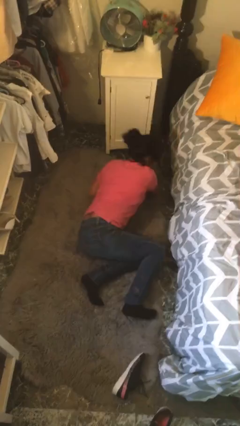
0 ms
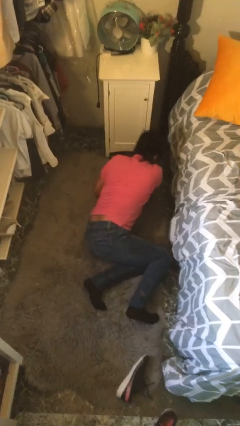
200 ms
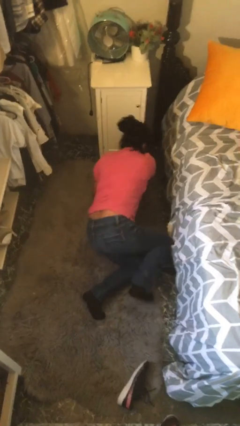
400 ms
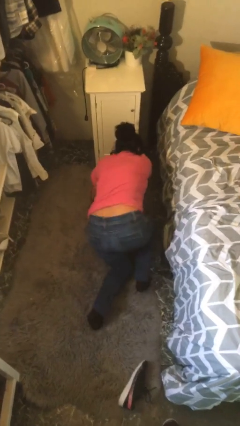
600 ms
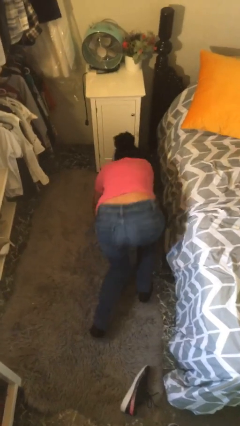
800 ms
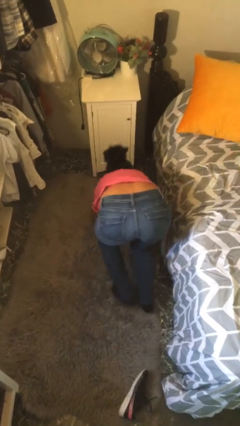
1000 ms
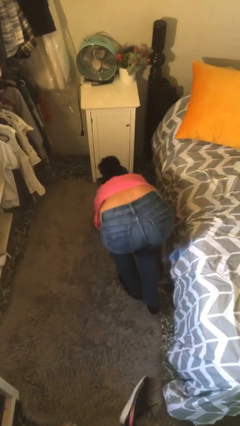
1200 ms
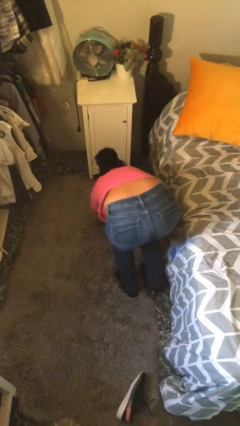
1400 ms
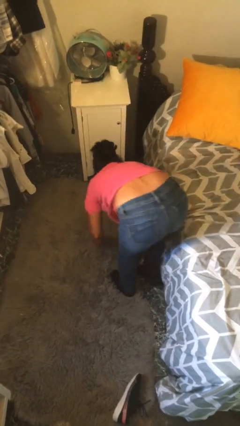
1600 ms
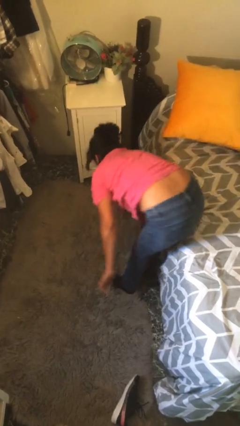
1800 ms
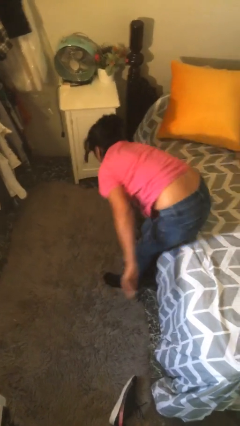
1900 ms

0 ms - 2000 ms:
person stands up from floor

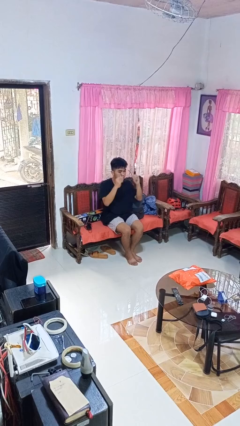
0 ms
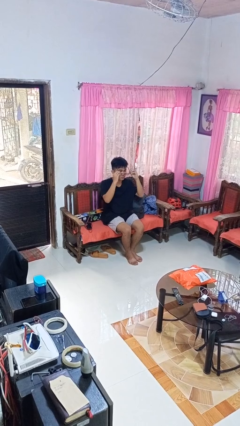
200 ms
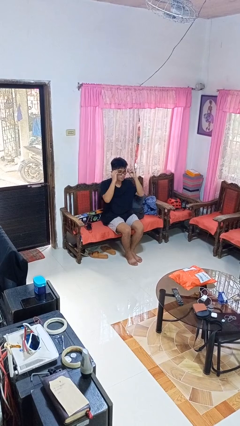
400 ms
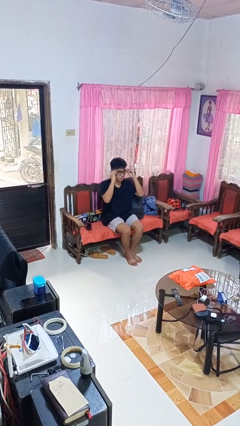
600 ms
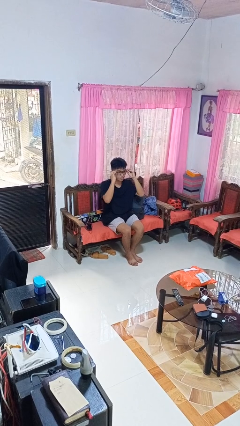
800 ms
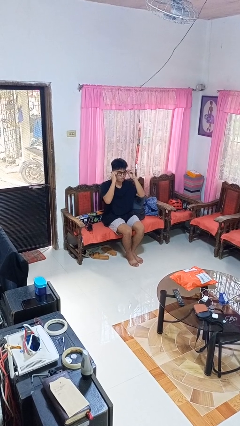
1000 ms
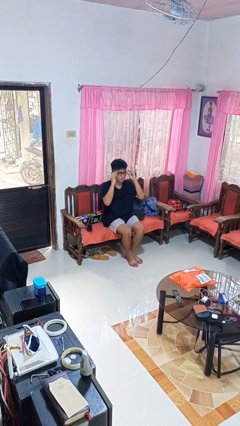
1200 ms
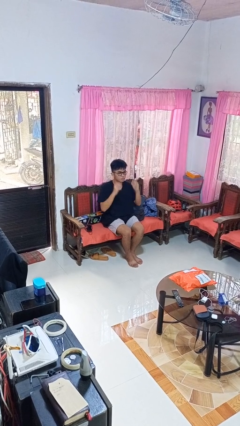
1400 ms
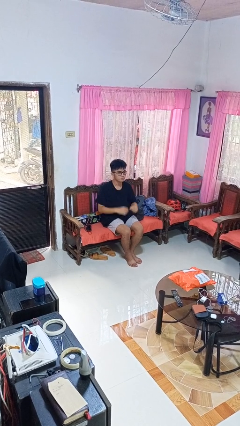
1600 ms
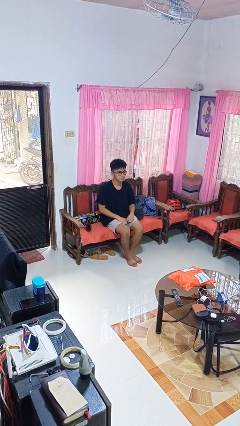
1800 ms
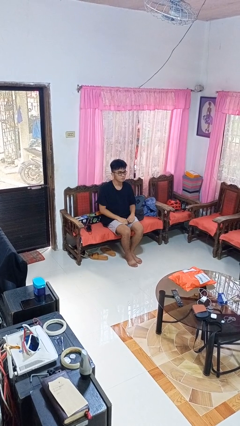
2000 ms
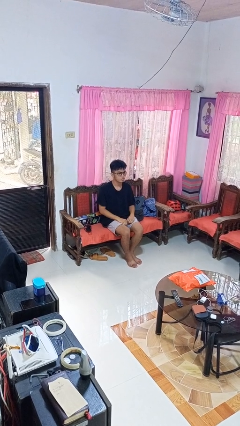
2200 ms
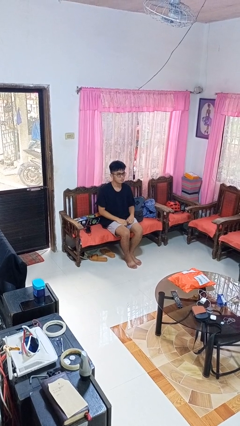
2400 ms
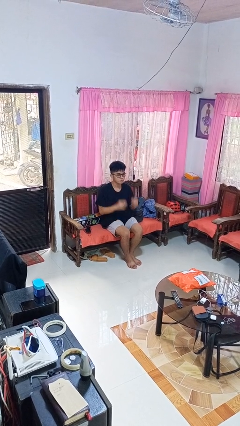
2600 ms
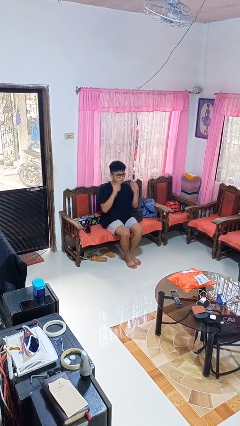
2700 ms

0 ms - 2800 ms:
person puts on glasses

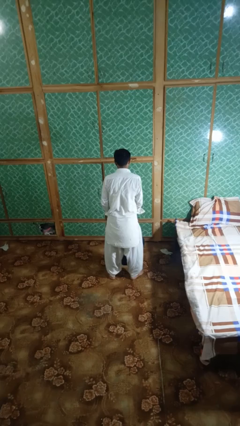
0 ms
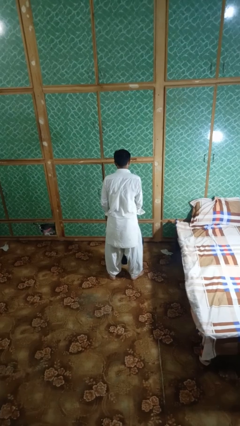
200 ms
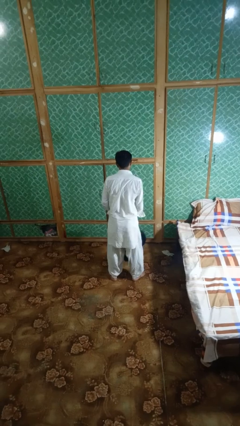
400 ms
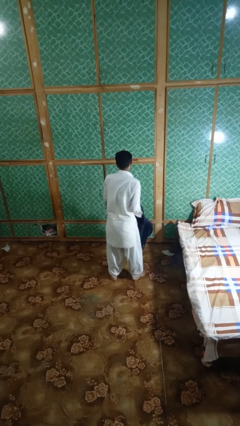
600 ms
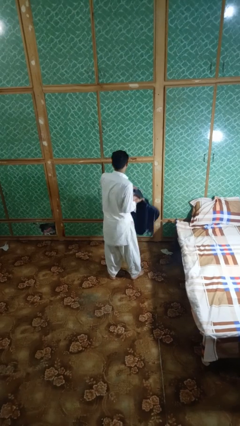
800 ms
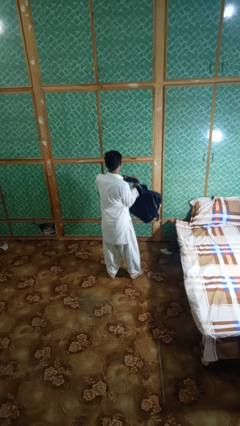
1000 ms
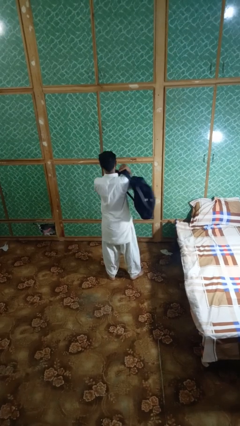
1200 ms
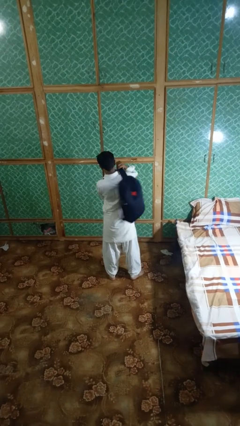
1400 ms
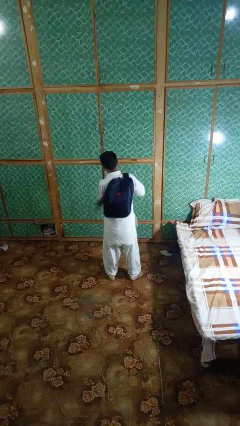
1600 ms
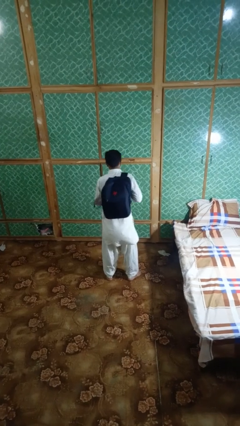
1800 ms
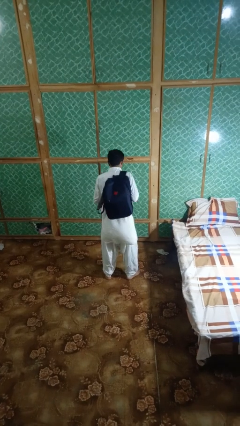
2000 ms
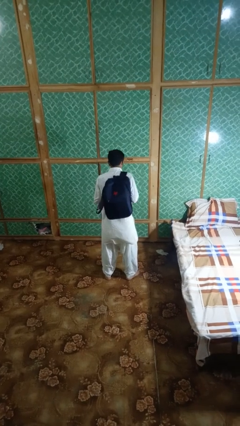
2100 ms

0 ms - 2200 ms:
person puts on backpack

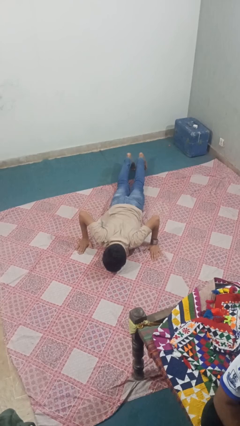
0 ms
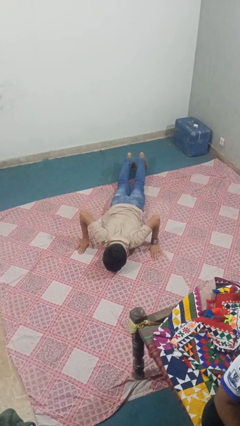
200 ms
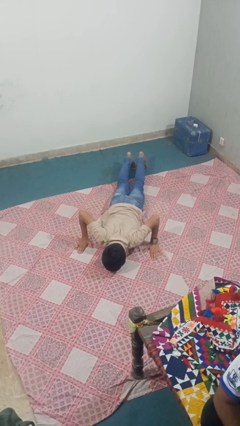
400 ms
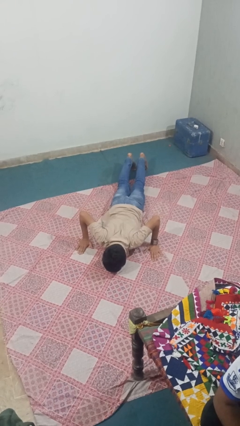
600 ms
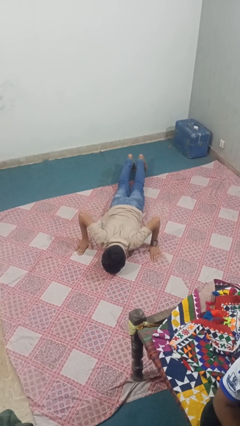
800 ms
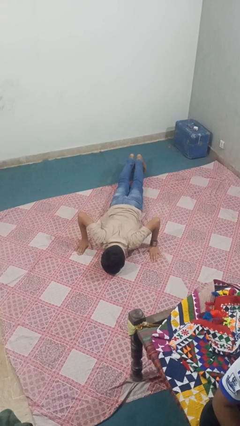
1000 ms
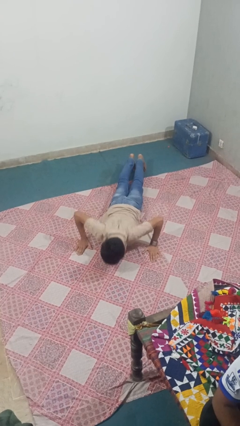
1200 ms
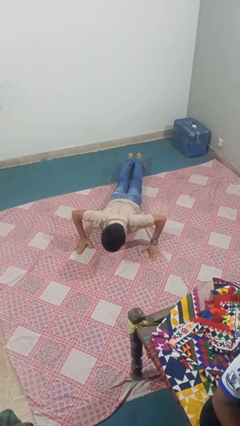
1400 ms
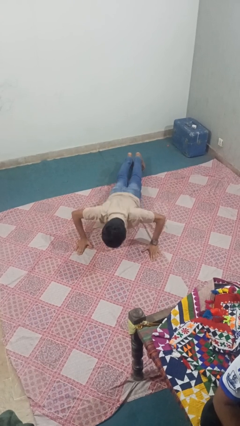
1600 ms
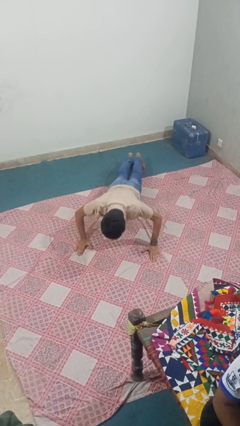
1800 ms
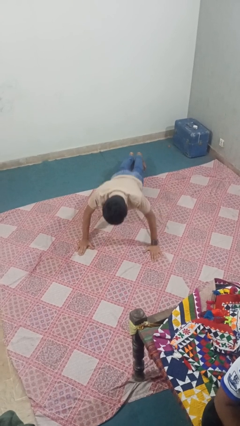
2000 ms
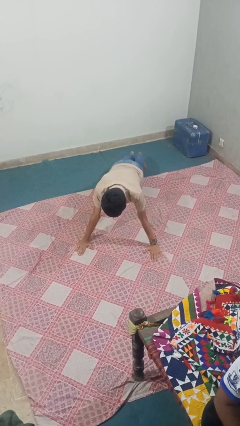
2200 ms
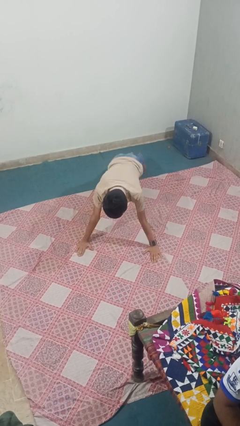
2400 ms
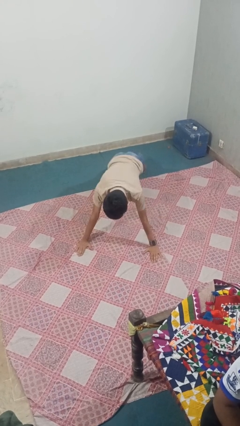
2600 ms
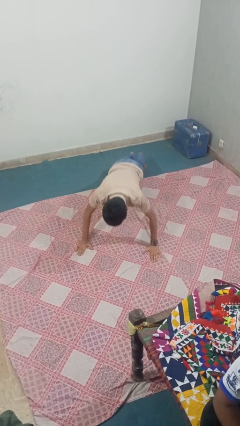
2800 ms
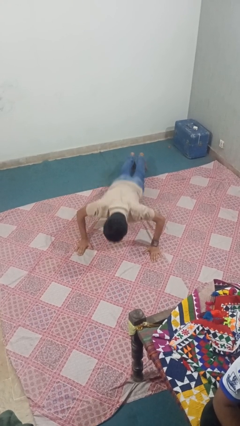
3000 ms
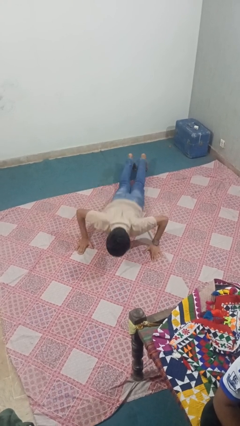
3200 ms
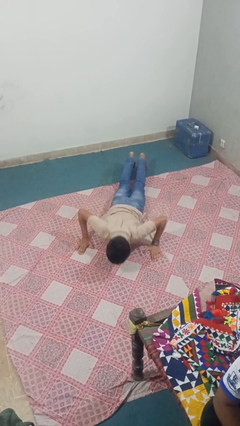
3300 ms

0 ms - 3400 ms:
person exercises with pushup

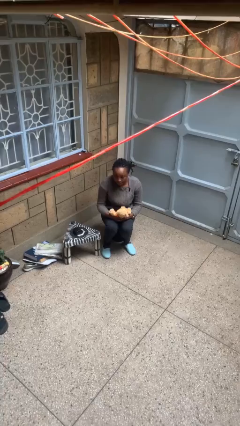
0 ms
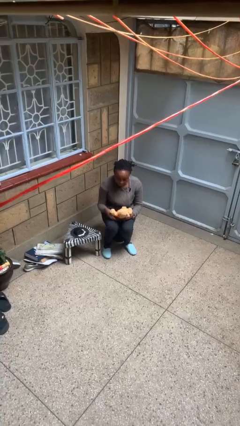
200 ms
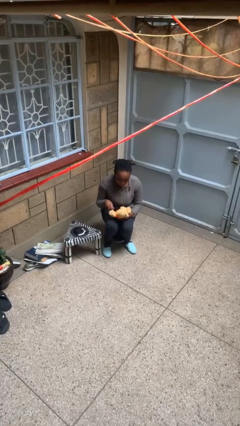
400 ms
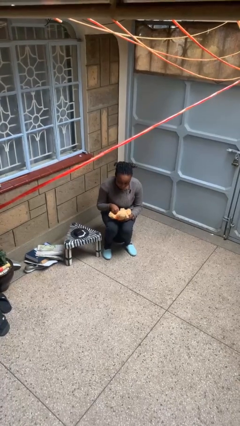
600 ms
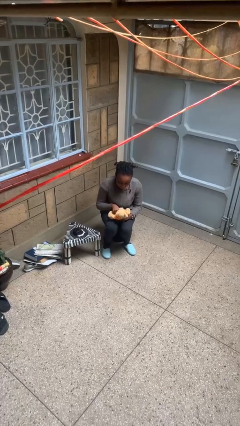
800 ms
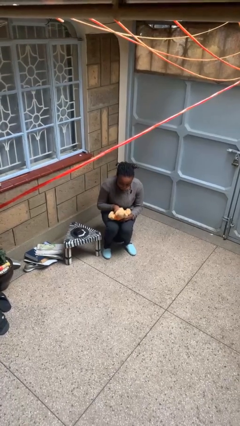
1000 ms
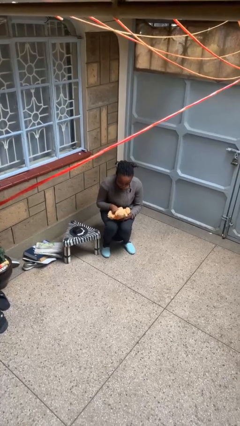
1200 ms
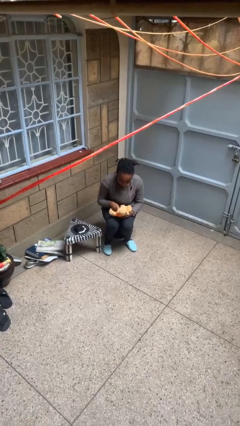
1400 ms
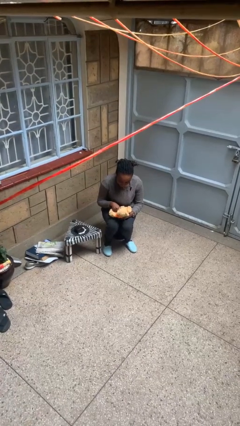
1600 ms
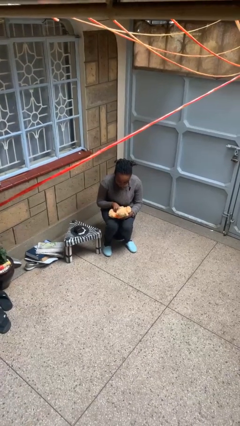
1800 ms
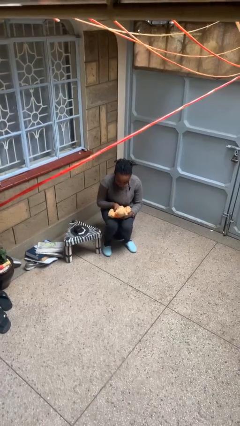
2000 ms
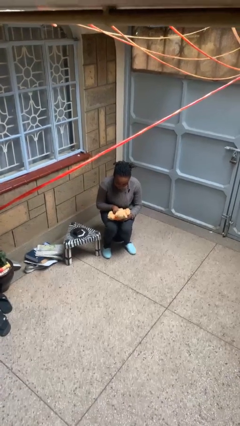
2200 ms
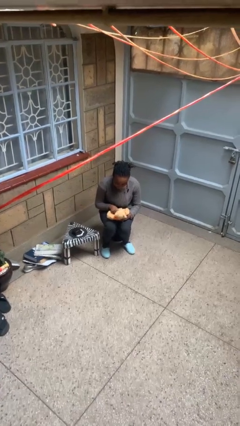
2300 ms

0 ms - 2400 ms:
person squeezes object

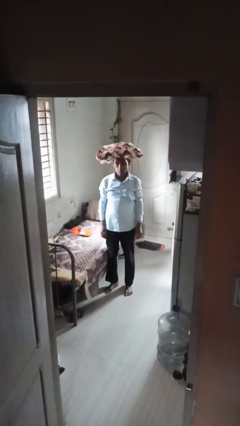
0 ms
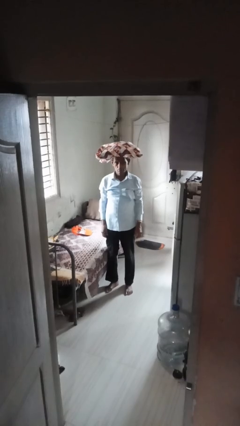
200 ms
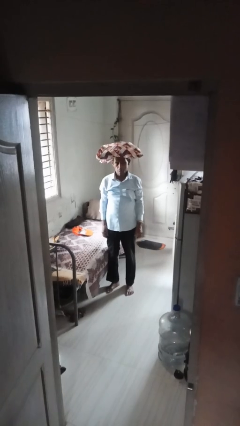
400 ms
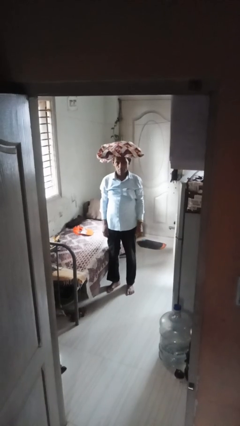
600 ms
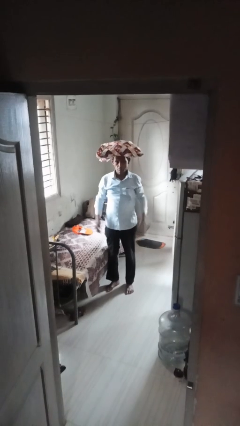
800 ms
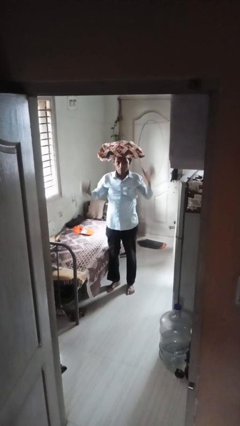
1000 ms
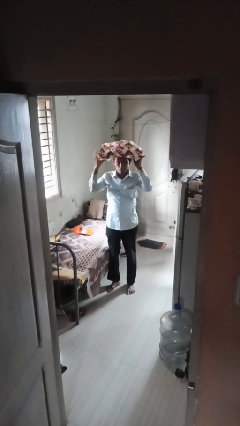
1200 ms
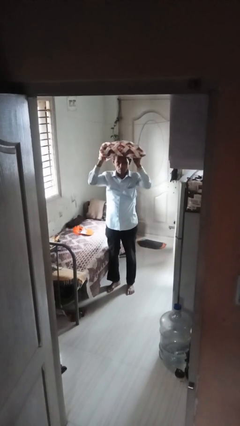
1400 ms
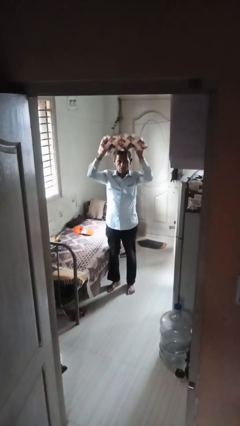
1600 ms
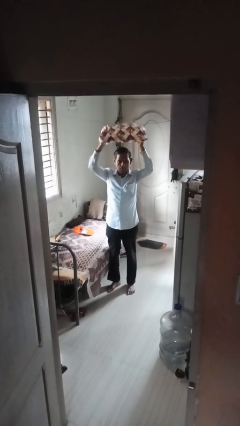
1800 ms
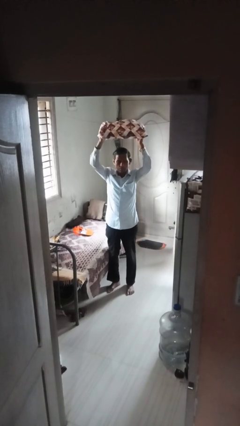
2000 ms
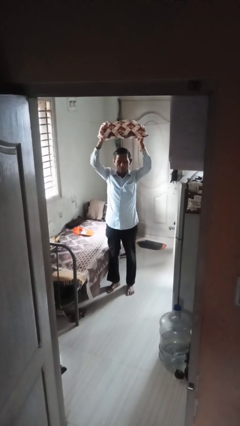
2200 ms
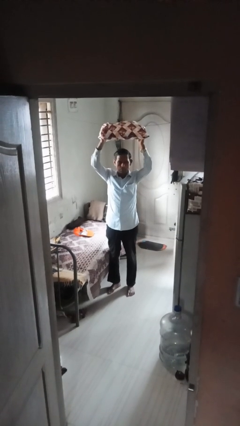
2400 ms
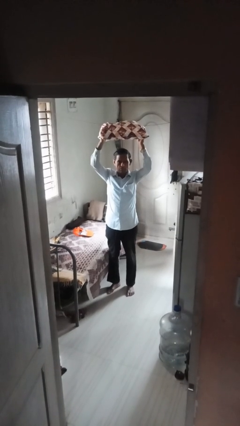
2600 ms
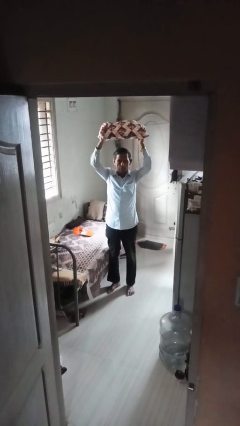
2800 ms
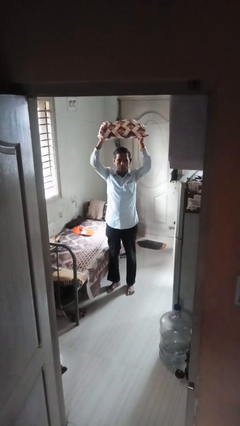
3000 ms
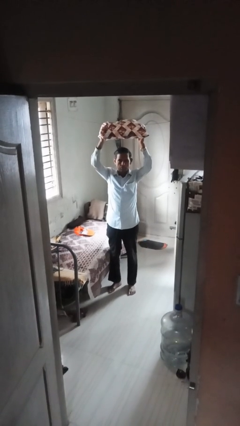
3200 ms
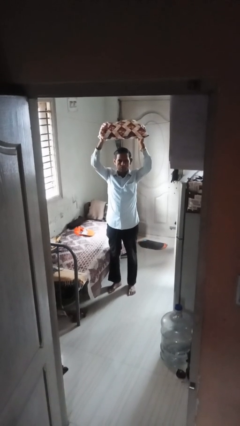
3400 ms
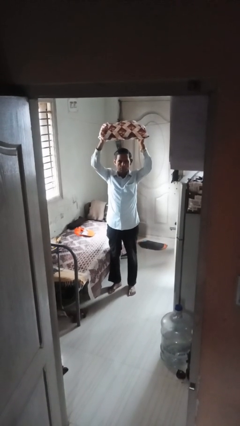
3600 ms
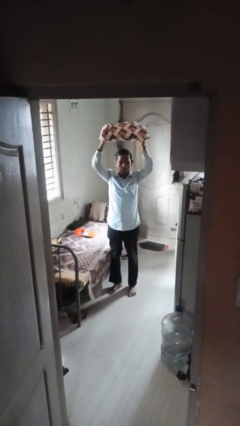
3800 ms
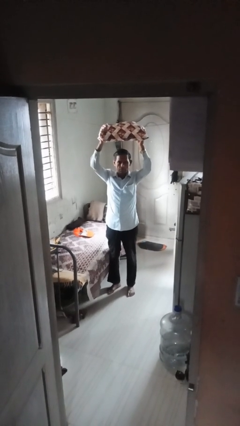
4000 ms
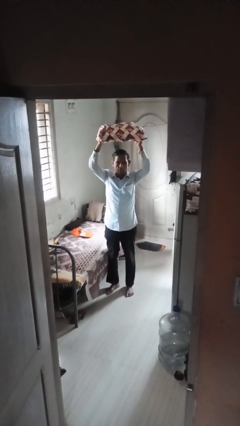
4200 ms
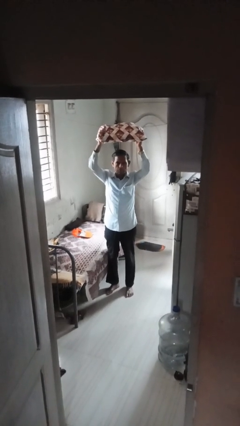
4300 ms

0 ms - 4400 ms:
person holds object above head

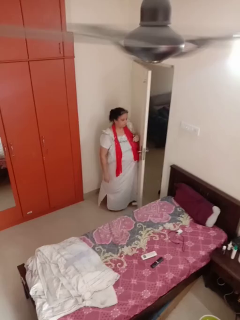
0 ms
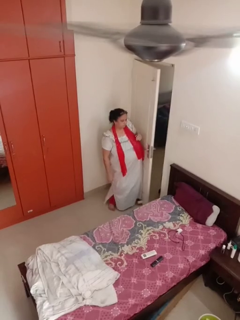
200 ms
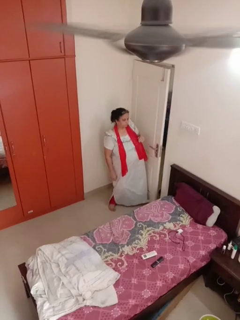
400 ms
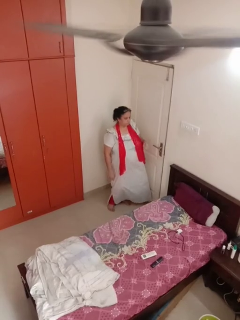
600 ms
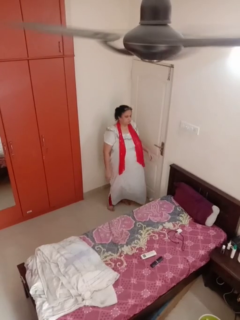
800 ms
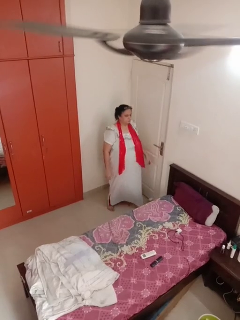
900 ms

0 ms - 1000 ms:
person closes door with hip
